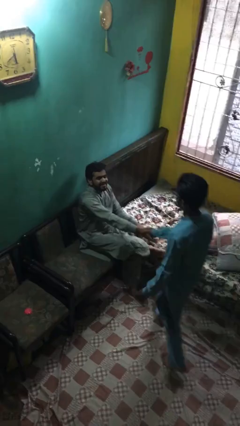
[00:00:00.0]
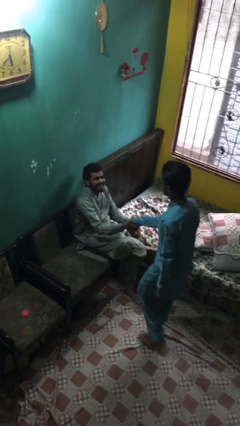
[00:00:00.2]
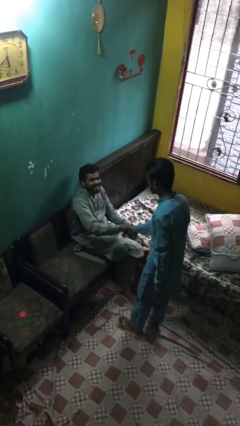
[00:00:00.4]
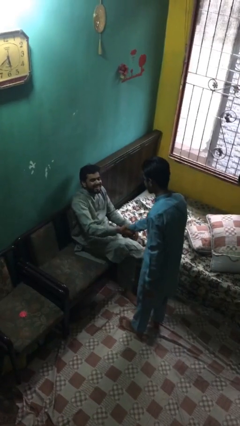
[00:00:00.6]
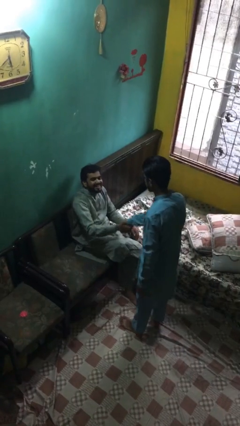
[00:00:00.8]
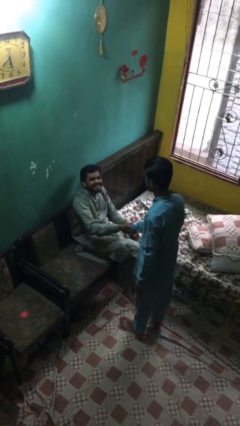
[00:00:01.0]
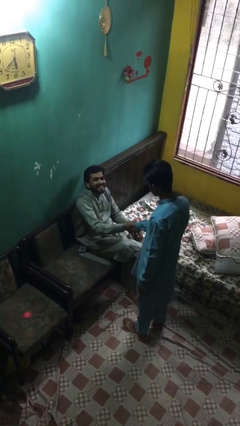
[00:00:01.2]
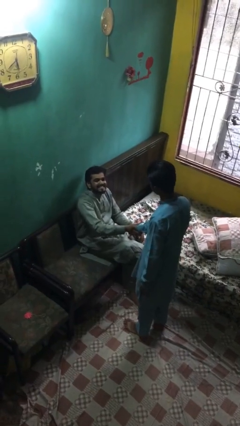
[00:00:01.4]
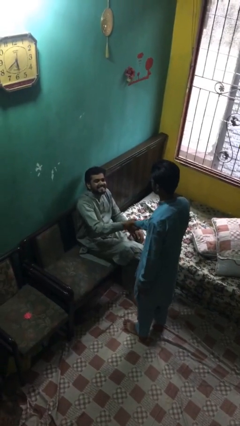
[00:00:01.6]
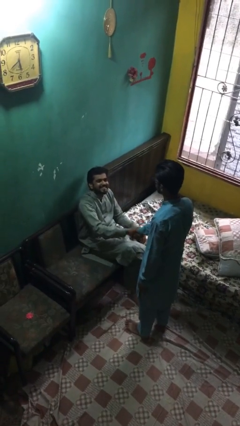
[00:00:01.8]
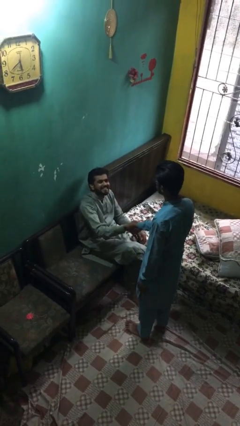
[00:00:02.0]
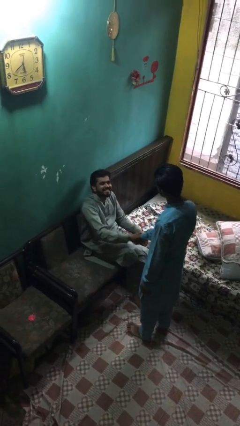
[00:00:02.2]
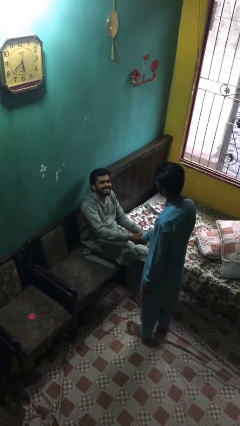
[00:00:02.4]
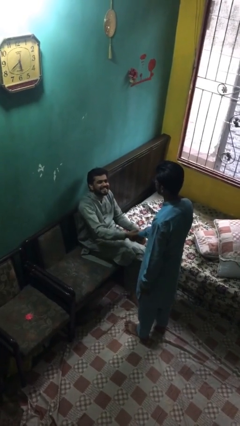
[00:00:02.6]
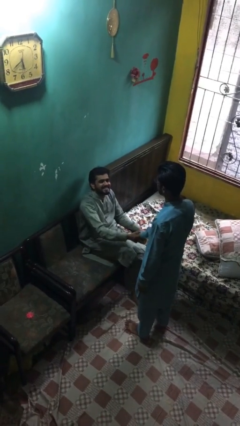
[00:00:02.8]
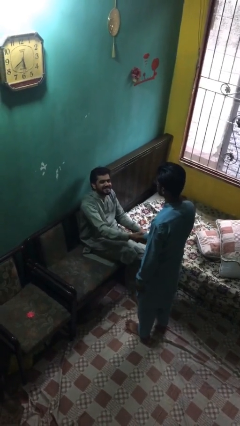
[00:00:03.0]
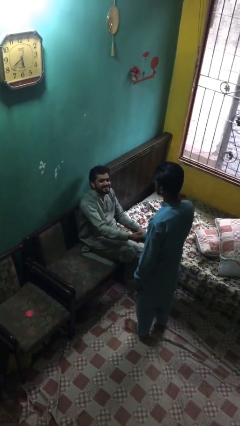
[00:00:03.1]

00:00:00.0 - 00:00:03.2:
person shakes hand

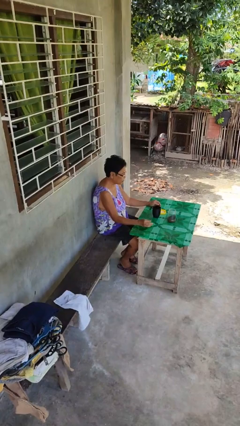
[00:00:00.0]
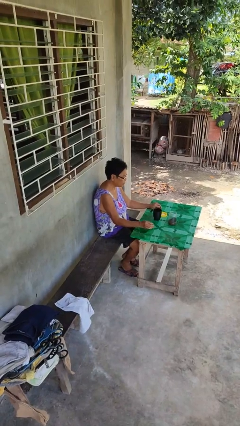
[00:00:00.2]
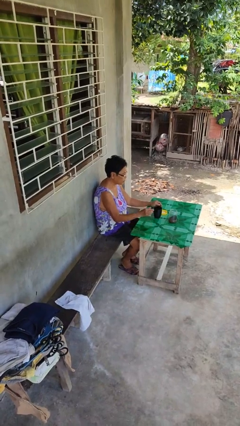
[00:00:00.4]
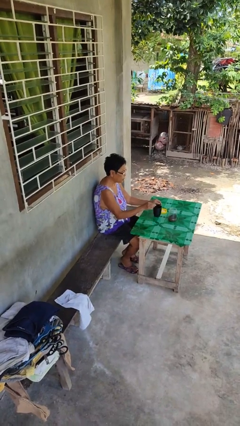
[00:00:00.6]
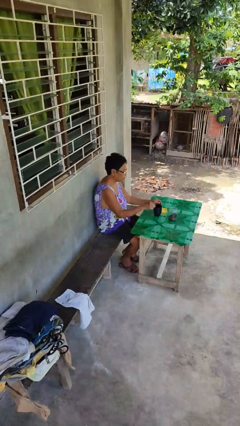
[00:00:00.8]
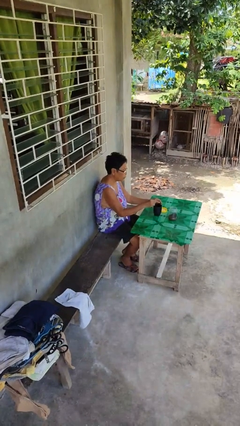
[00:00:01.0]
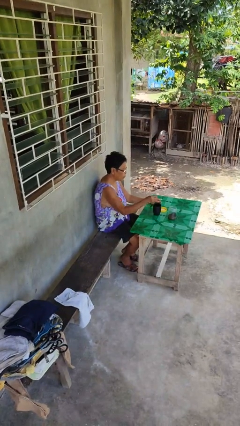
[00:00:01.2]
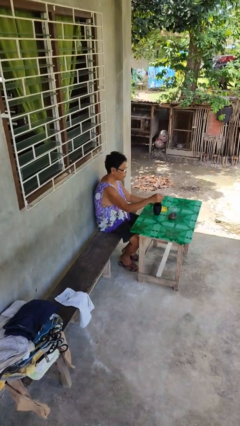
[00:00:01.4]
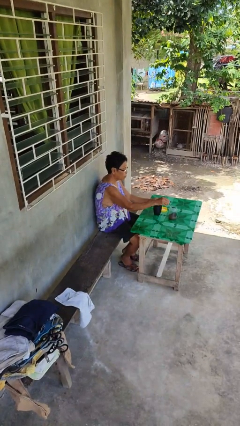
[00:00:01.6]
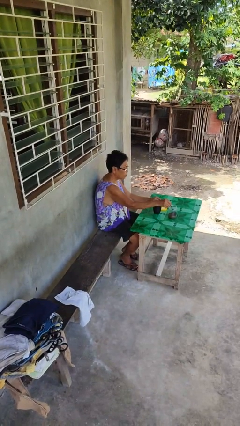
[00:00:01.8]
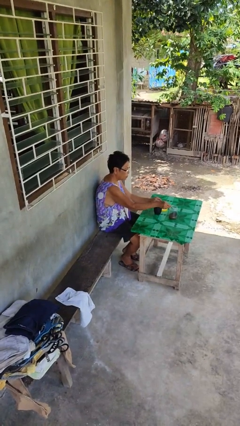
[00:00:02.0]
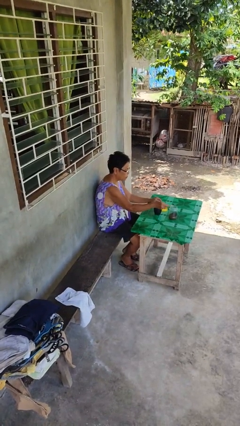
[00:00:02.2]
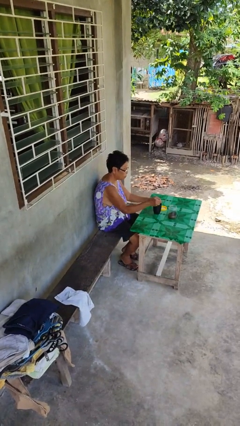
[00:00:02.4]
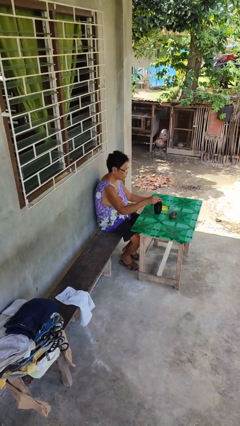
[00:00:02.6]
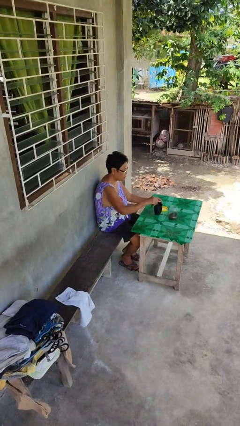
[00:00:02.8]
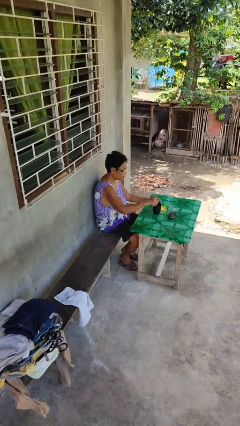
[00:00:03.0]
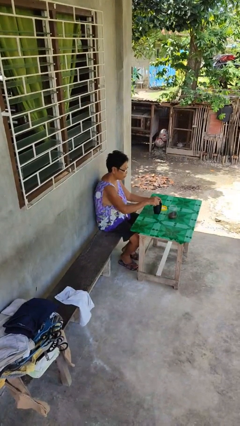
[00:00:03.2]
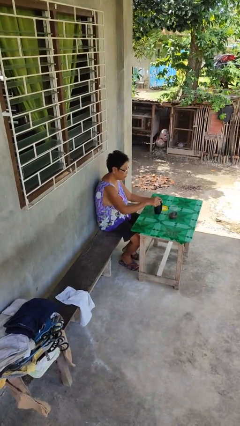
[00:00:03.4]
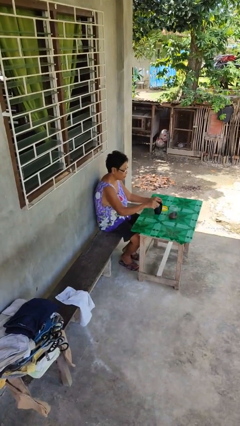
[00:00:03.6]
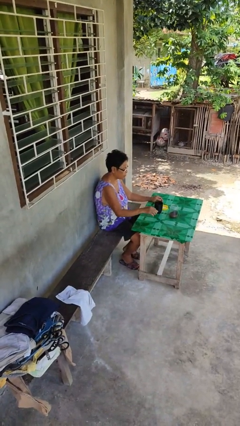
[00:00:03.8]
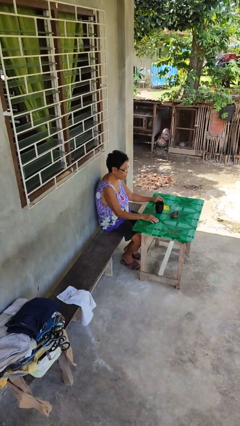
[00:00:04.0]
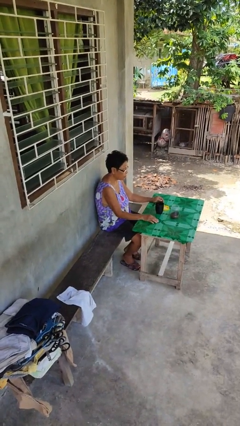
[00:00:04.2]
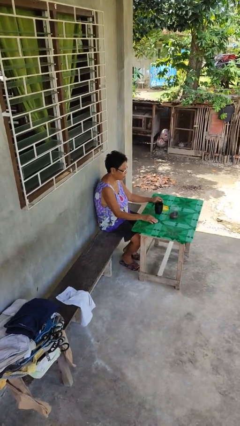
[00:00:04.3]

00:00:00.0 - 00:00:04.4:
person pours coffee into mug

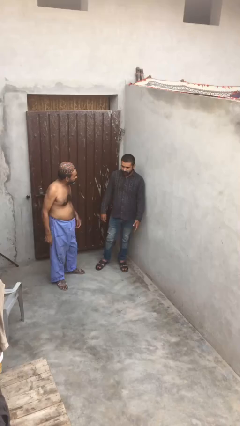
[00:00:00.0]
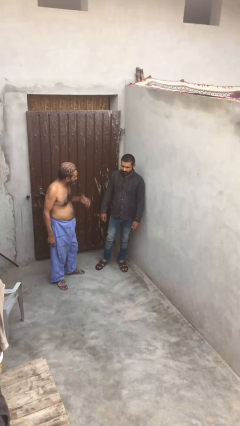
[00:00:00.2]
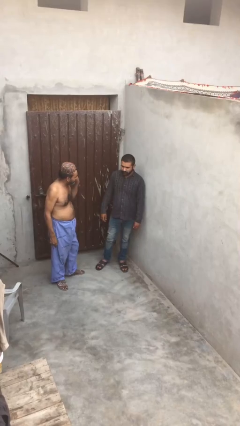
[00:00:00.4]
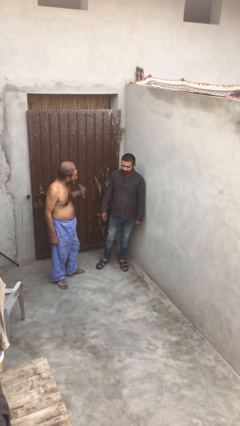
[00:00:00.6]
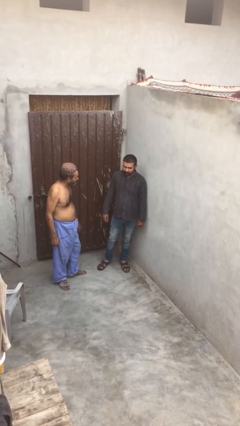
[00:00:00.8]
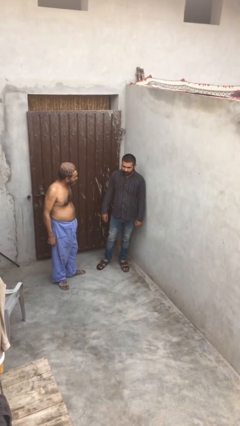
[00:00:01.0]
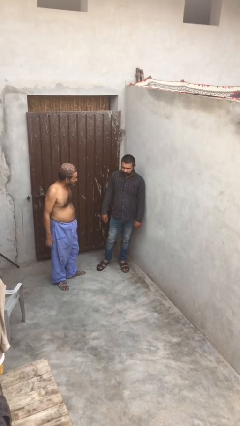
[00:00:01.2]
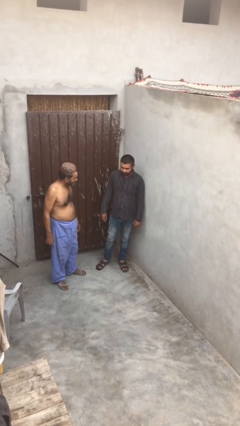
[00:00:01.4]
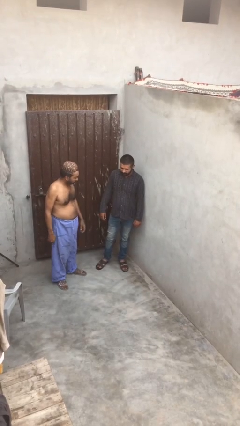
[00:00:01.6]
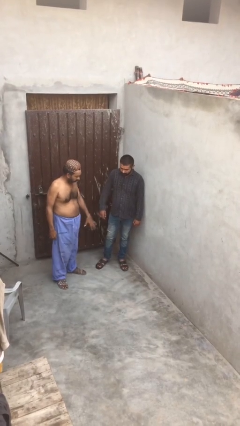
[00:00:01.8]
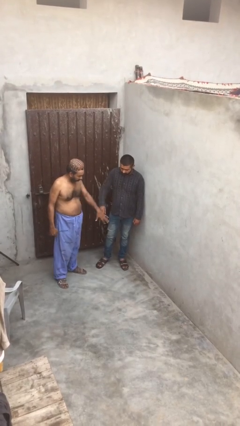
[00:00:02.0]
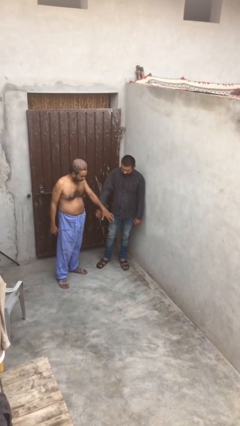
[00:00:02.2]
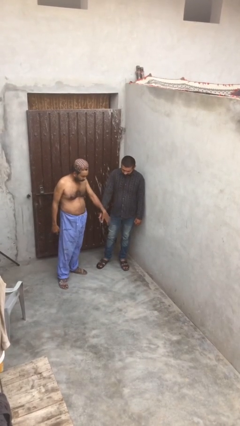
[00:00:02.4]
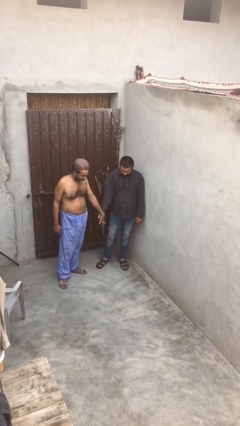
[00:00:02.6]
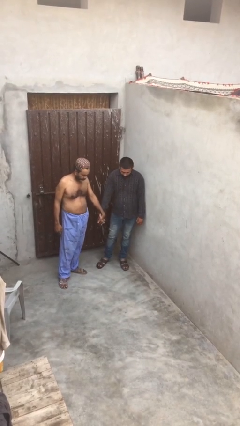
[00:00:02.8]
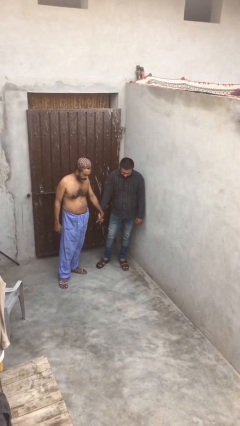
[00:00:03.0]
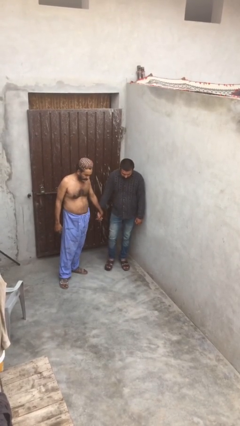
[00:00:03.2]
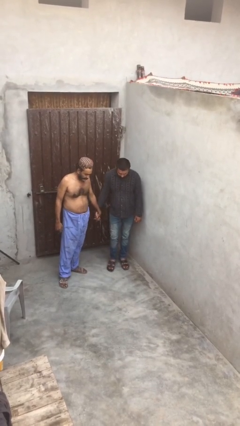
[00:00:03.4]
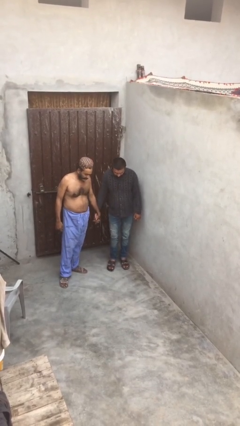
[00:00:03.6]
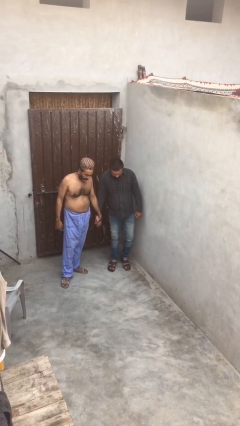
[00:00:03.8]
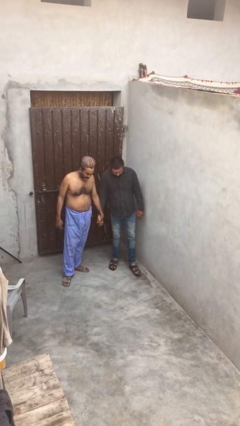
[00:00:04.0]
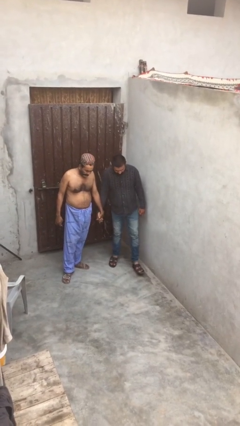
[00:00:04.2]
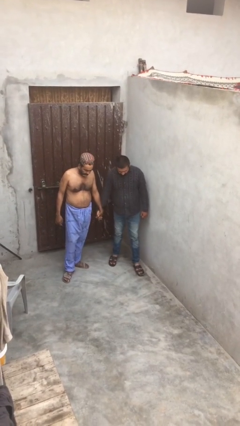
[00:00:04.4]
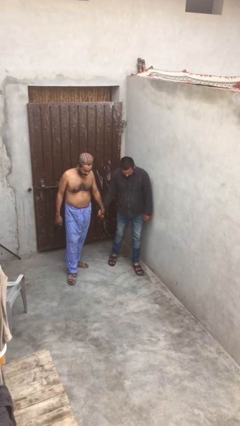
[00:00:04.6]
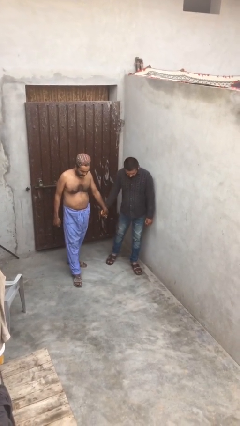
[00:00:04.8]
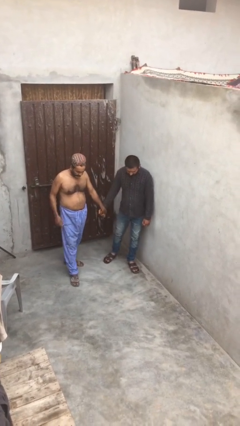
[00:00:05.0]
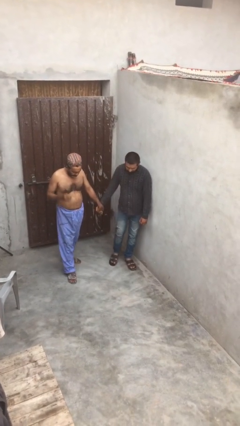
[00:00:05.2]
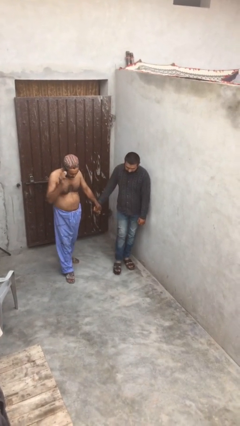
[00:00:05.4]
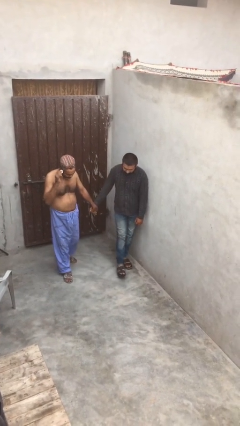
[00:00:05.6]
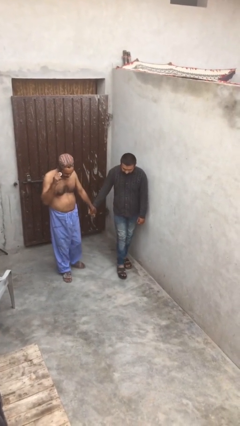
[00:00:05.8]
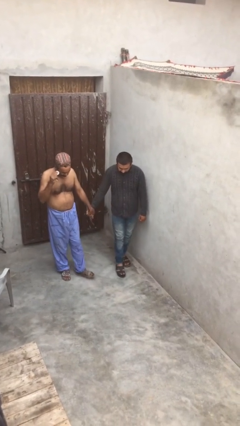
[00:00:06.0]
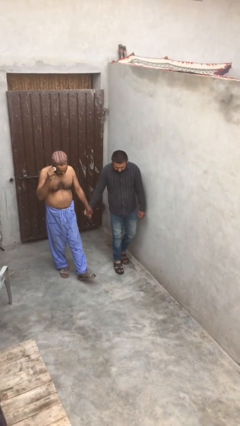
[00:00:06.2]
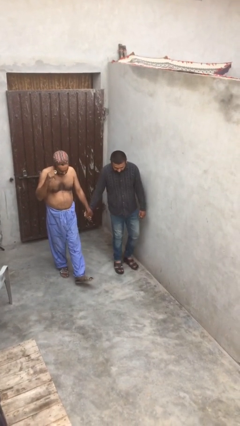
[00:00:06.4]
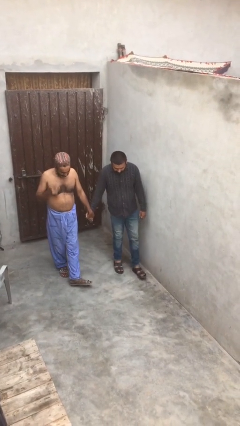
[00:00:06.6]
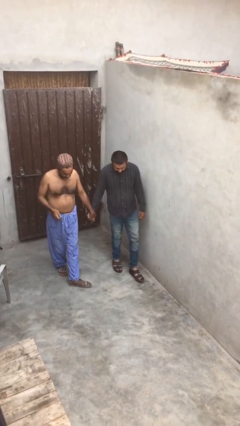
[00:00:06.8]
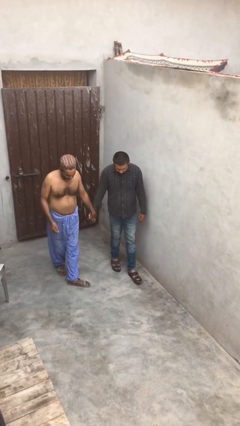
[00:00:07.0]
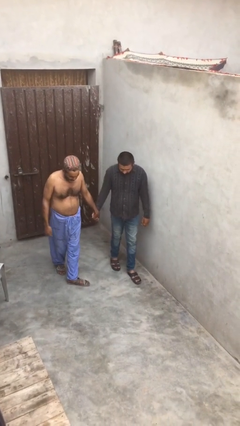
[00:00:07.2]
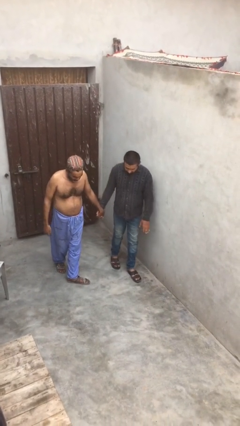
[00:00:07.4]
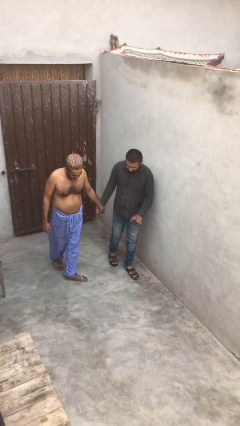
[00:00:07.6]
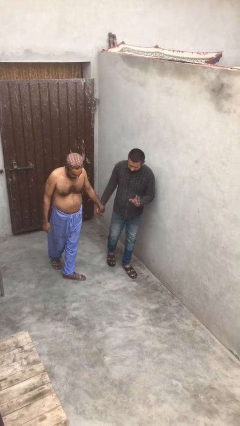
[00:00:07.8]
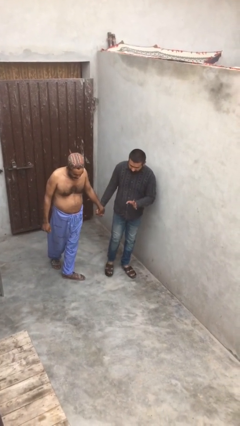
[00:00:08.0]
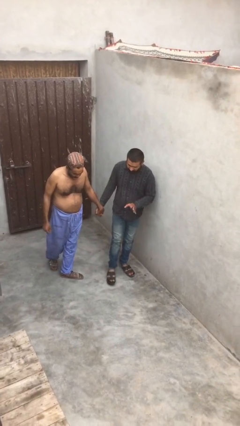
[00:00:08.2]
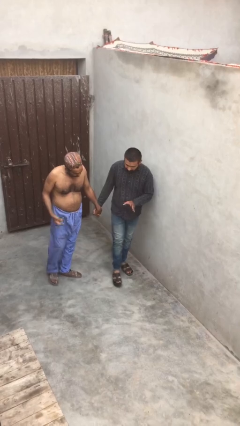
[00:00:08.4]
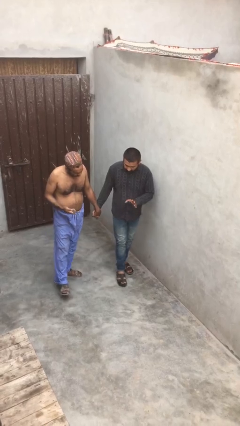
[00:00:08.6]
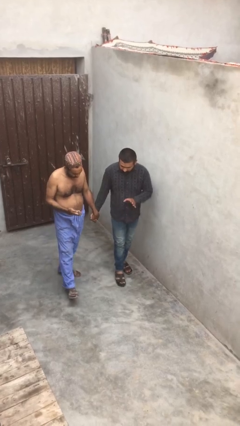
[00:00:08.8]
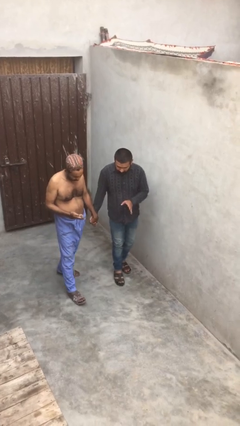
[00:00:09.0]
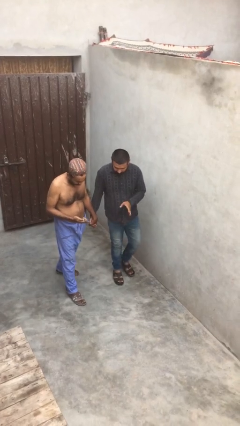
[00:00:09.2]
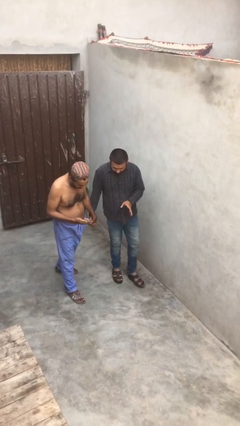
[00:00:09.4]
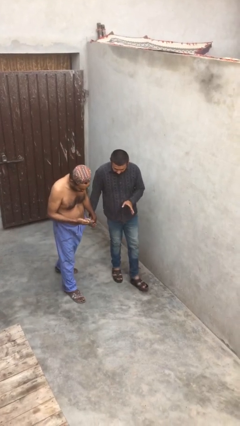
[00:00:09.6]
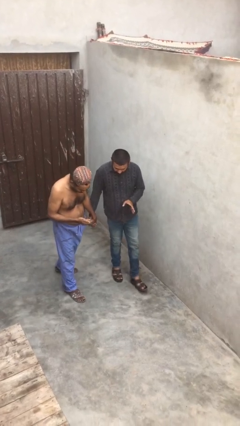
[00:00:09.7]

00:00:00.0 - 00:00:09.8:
person holds hand

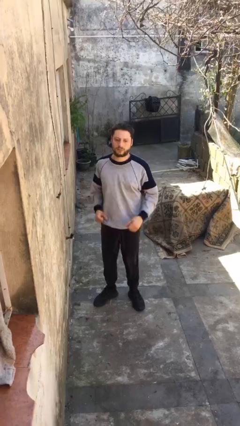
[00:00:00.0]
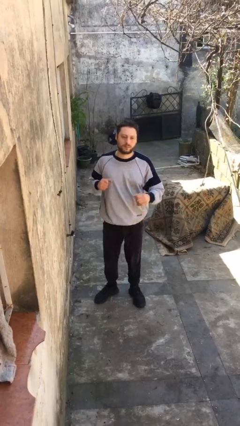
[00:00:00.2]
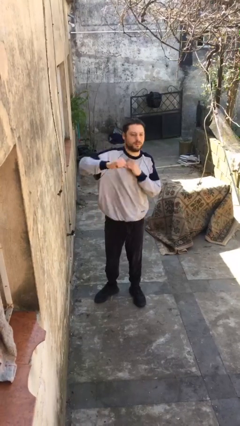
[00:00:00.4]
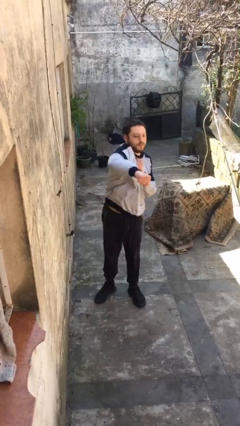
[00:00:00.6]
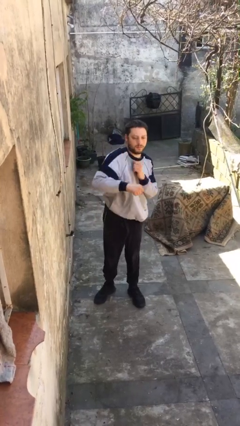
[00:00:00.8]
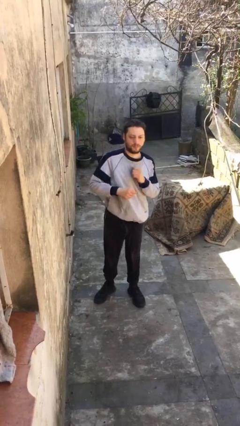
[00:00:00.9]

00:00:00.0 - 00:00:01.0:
person punches
